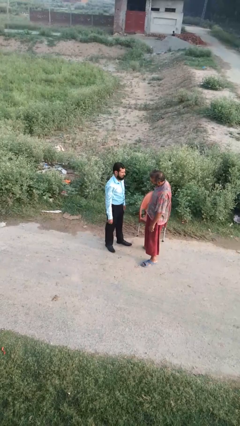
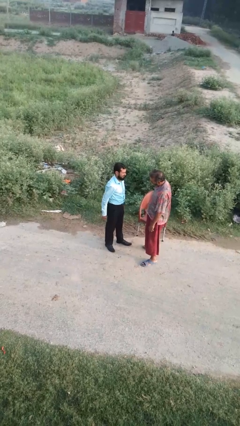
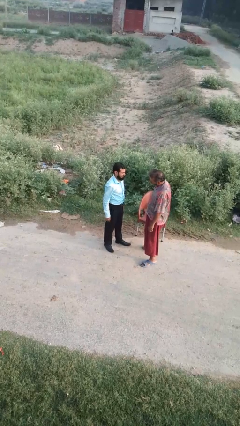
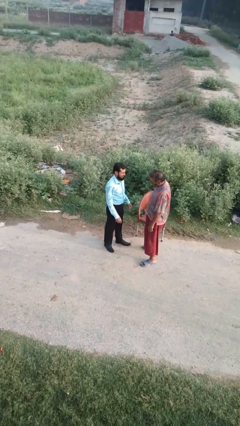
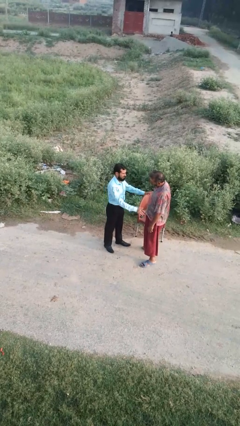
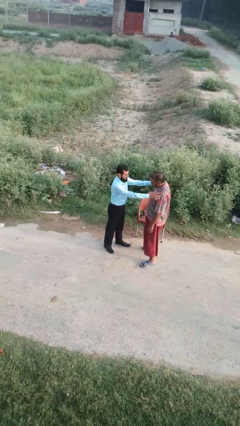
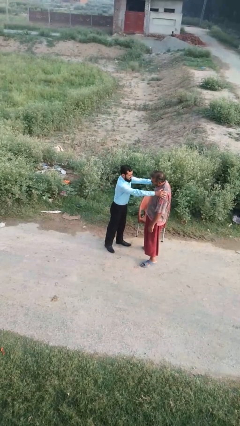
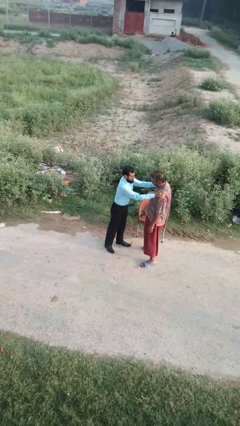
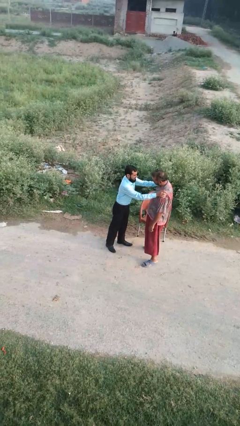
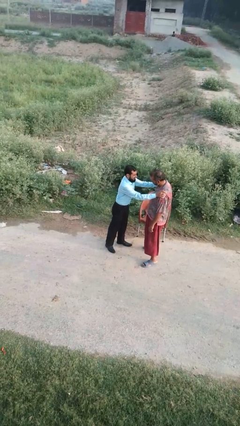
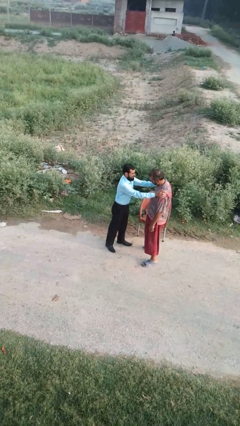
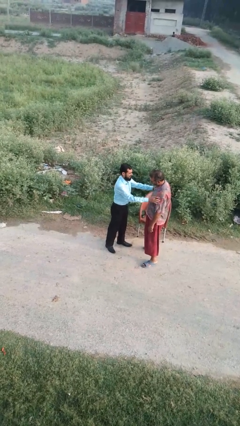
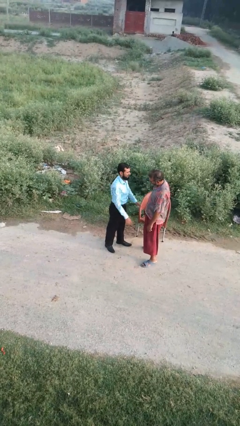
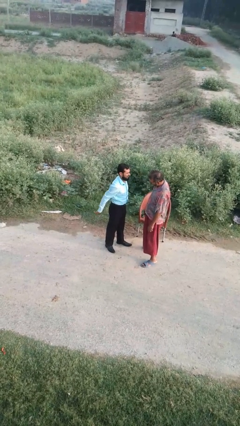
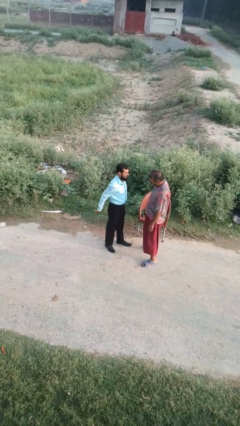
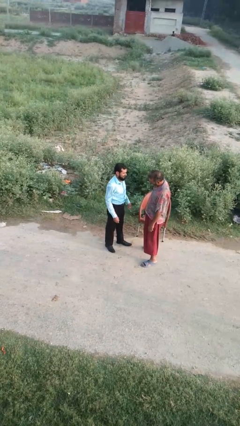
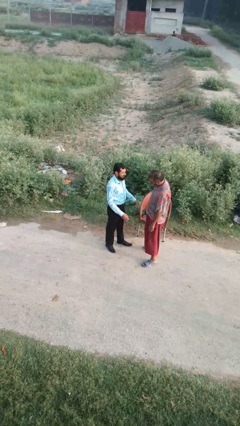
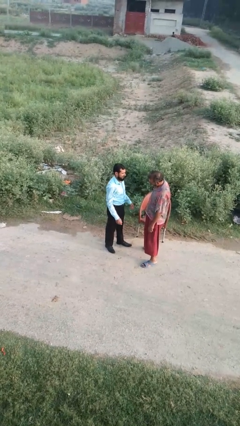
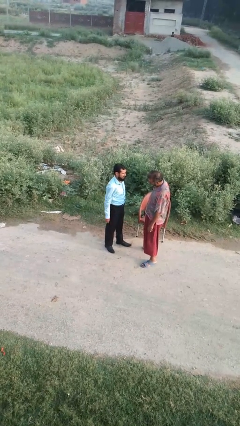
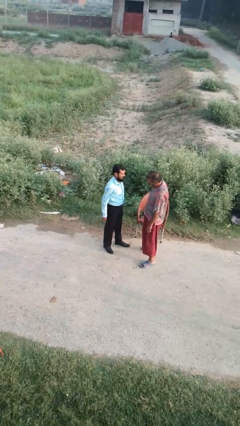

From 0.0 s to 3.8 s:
person pounds shoulders of person

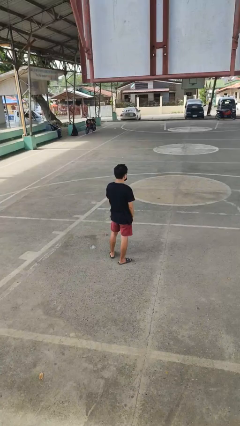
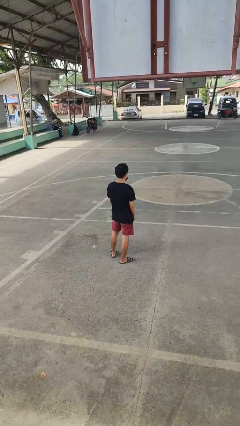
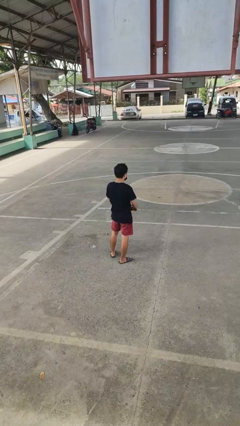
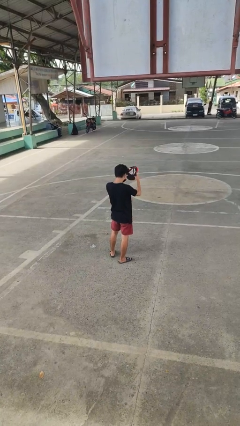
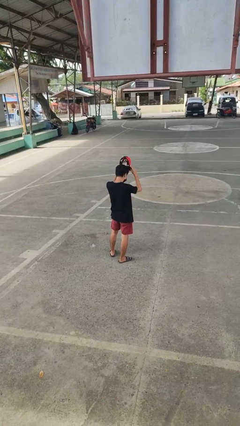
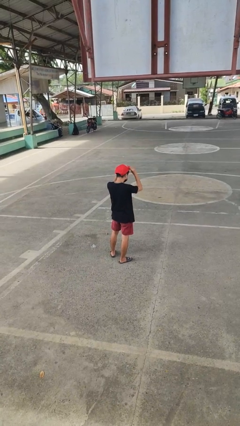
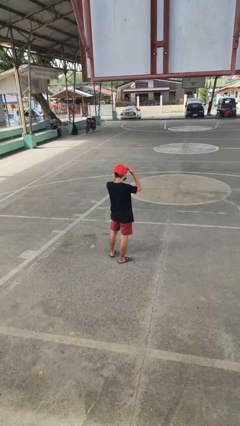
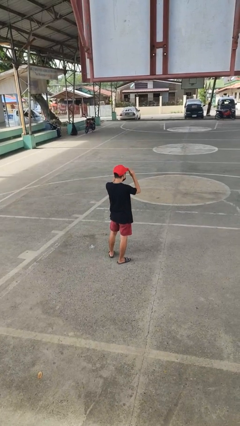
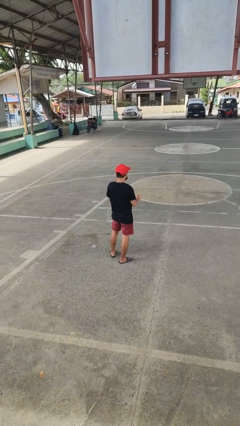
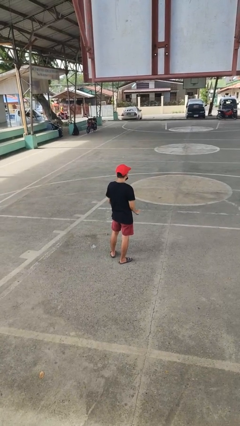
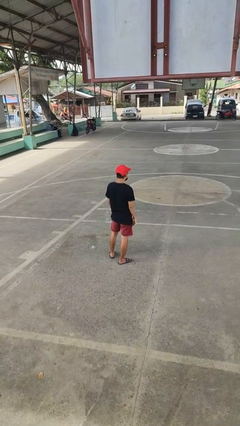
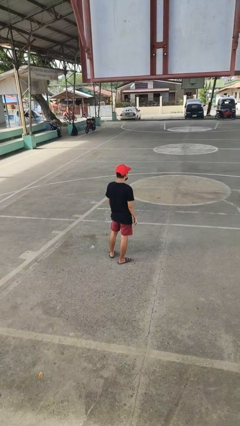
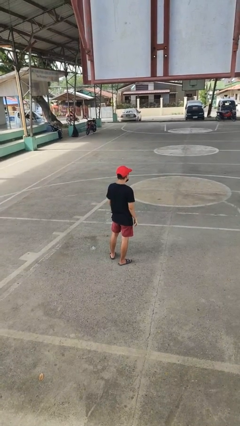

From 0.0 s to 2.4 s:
person puts on hat

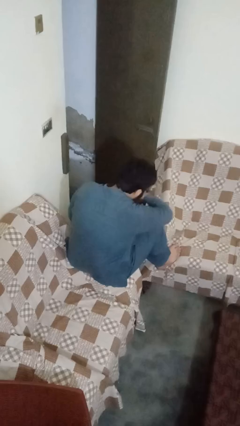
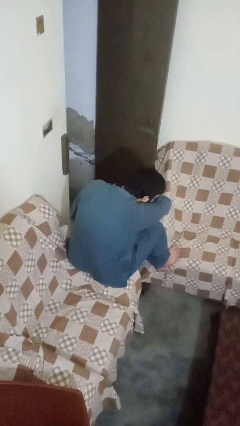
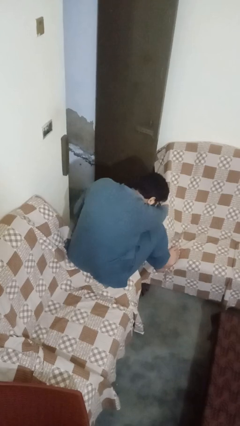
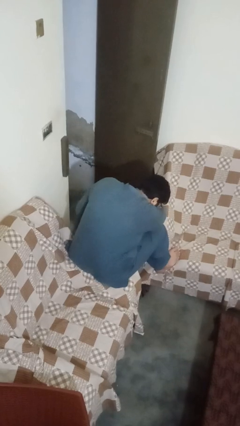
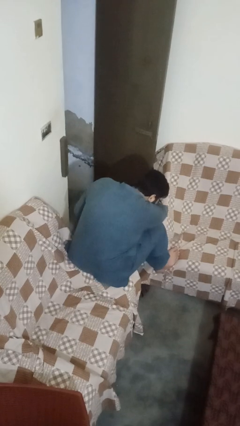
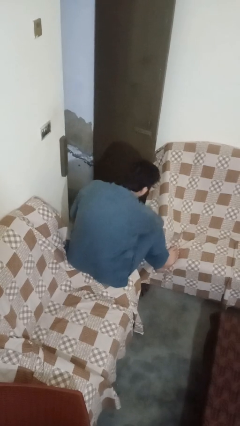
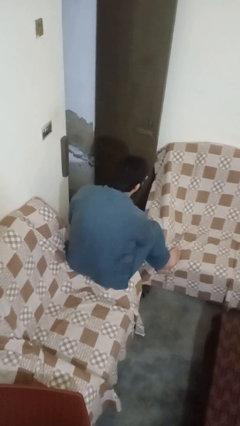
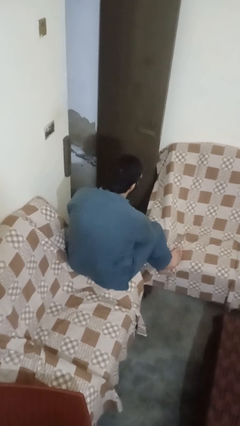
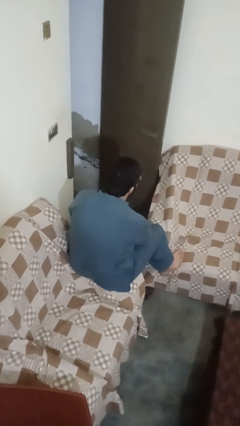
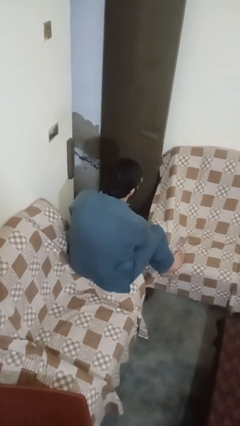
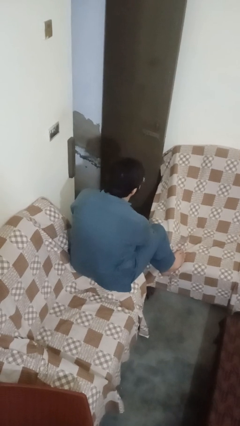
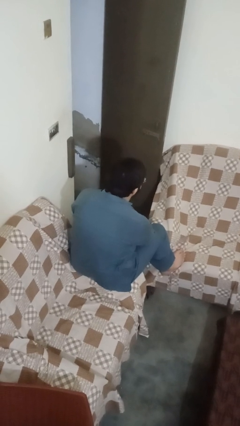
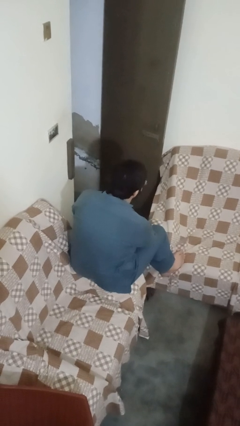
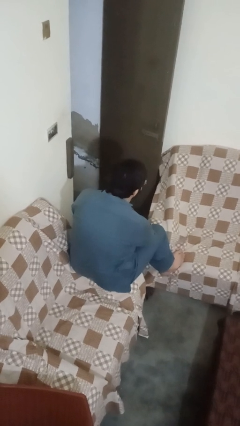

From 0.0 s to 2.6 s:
person sneezes into arm

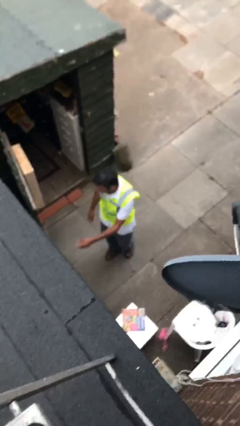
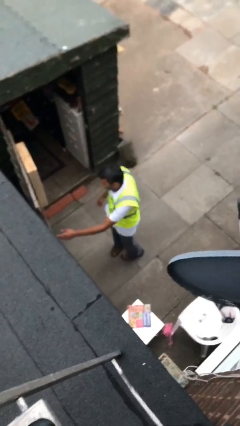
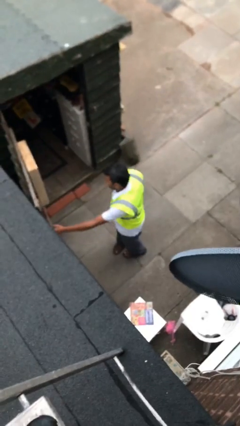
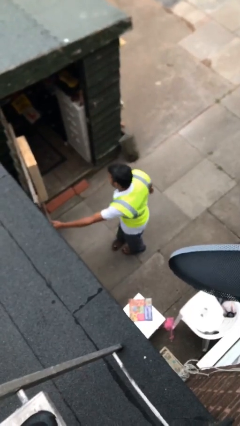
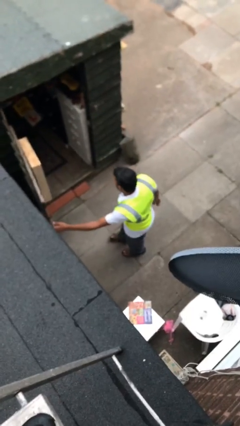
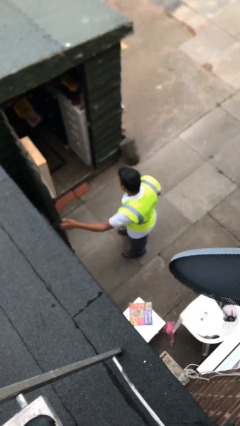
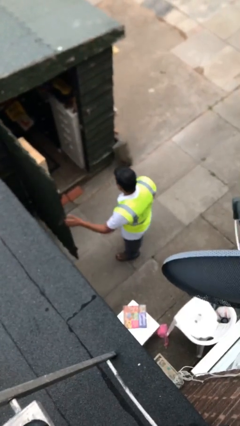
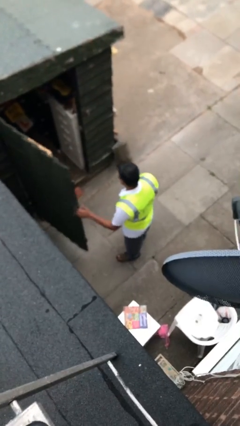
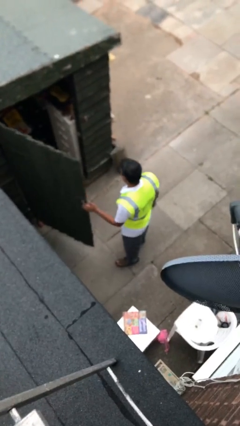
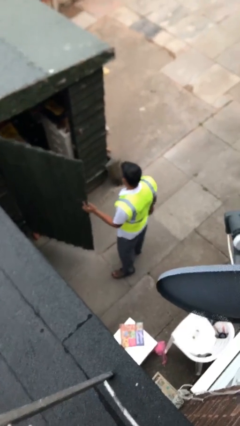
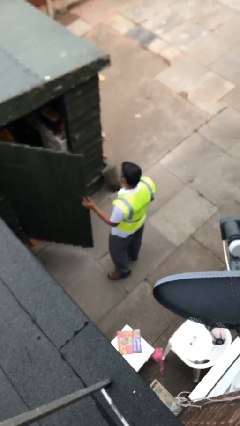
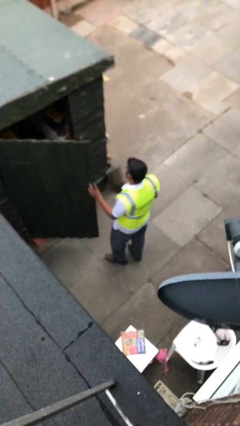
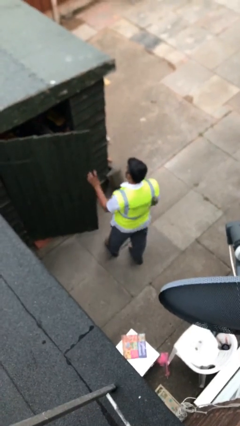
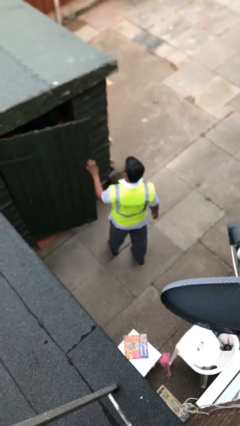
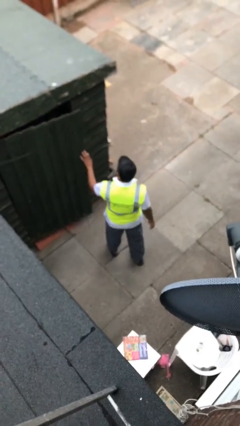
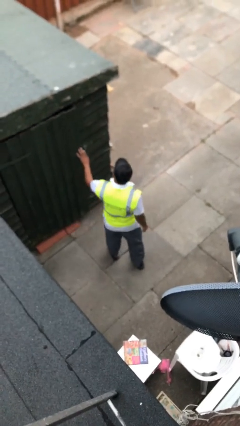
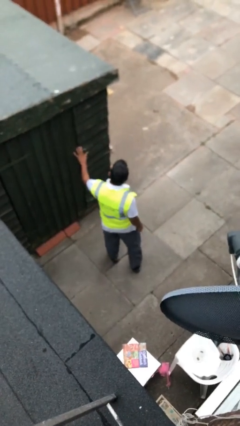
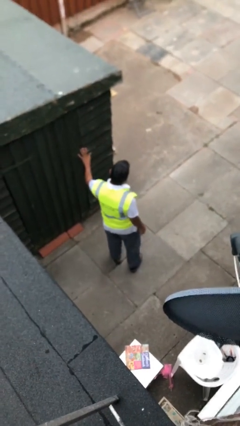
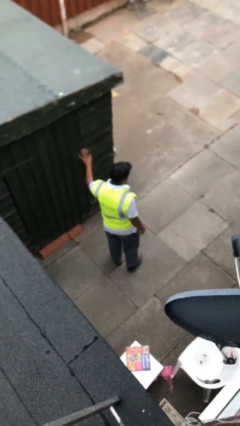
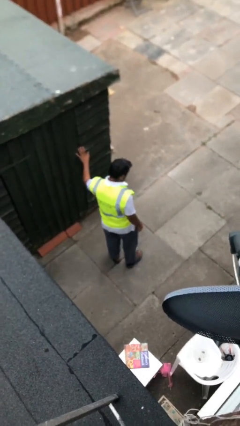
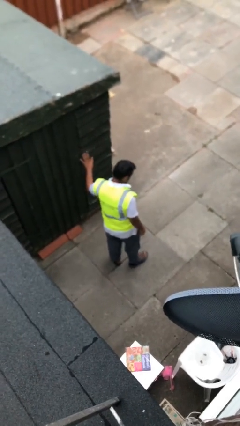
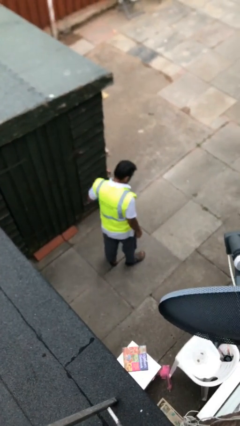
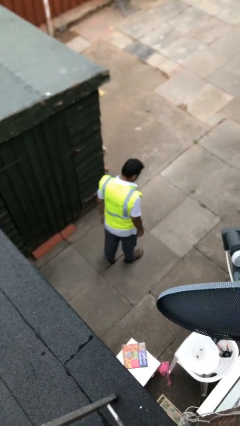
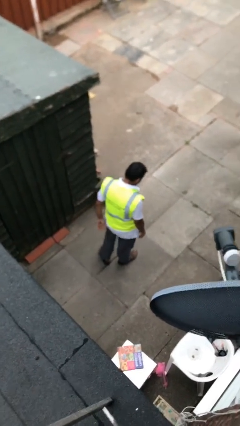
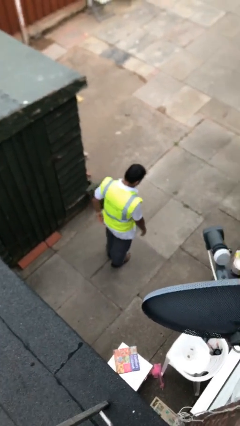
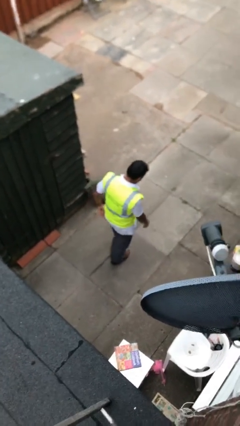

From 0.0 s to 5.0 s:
person closes facility door

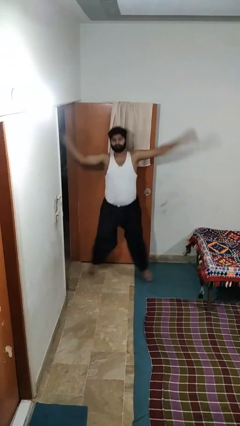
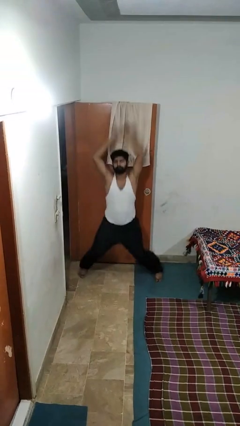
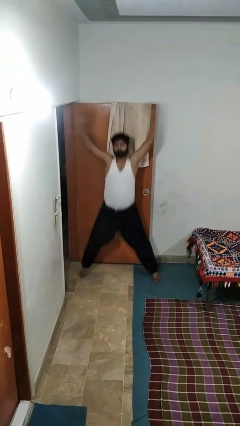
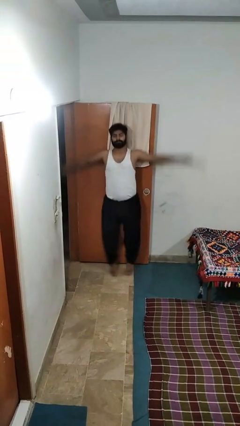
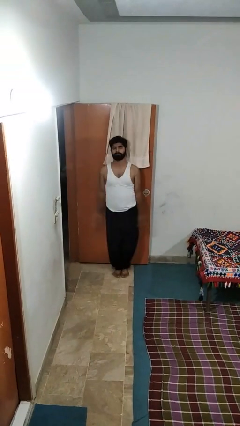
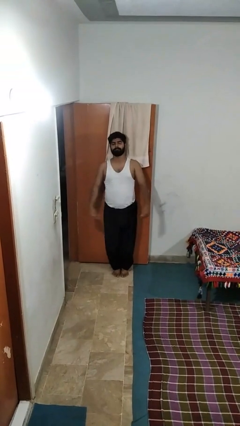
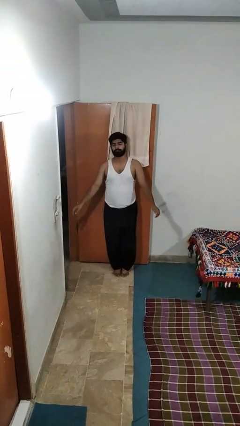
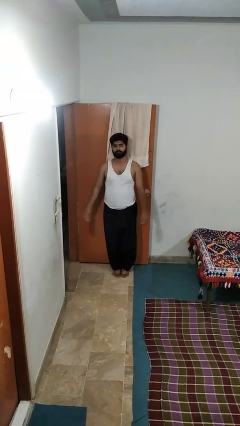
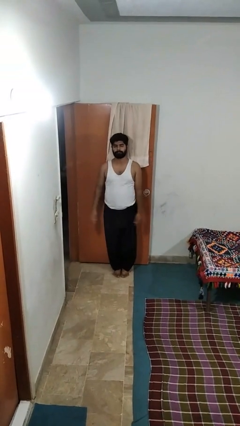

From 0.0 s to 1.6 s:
person exercises with jumping jacks

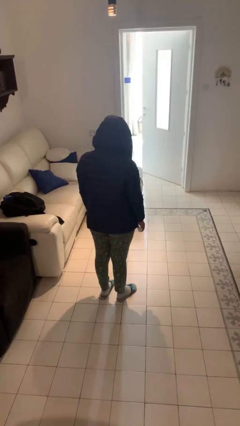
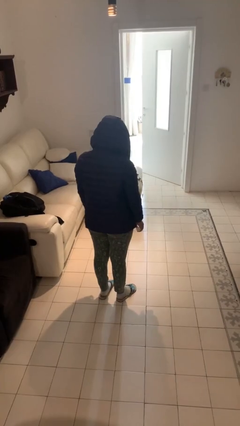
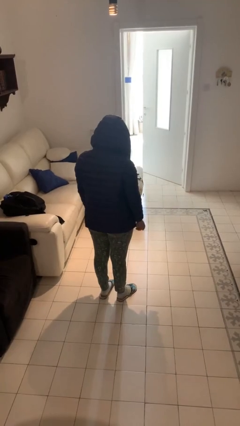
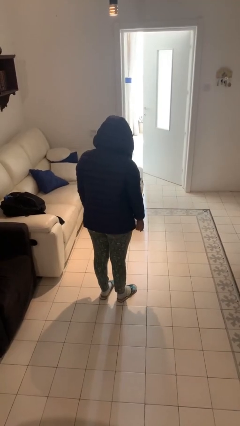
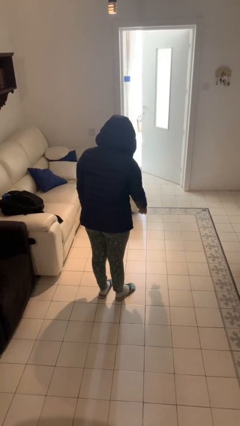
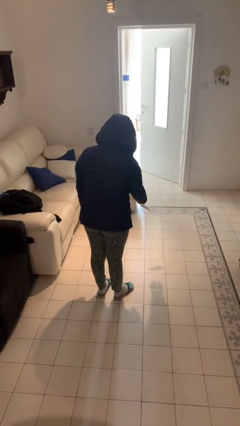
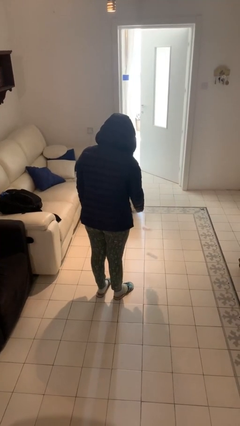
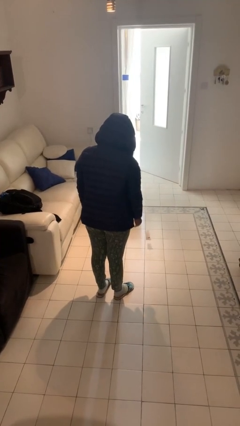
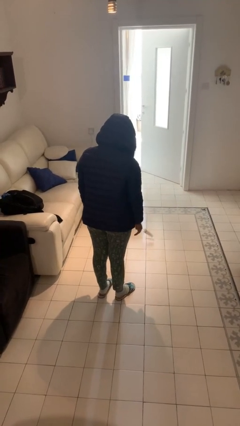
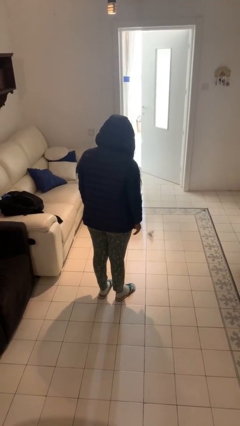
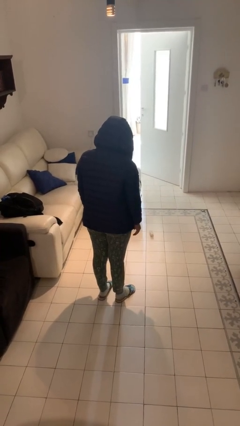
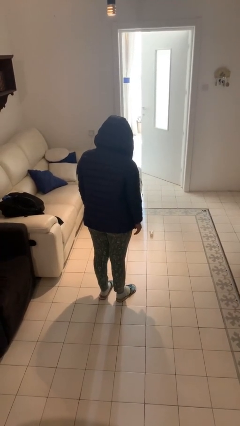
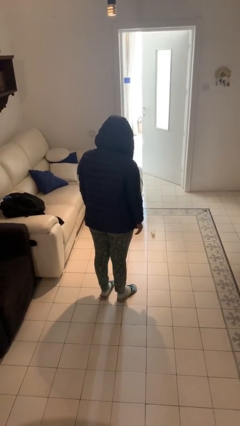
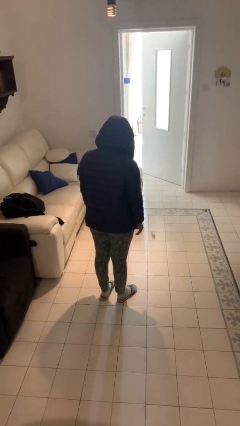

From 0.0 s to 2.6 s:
person throws object to ground
